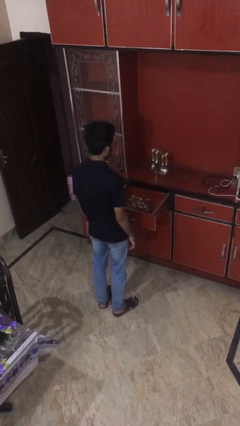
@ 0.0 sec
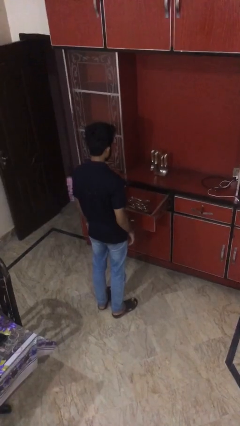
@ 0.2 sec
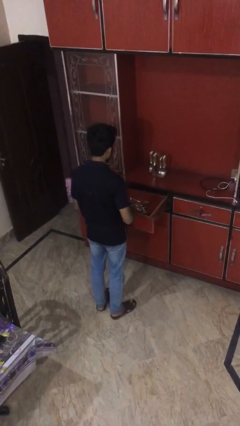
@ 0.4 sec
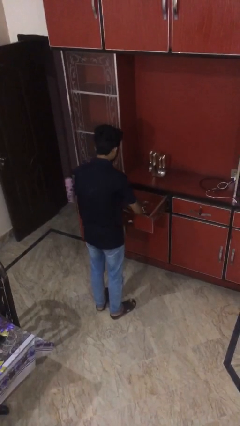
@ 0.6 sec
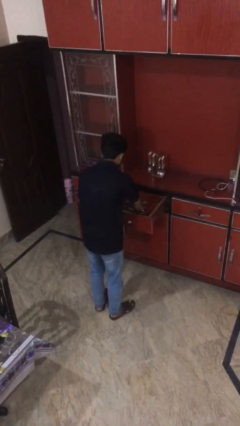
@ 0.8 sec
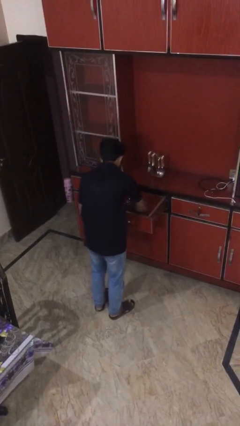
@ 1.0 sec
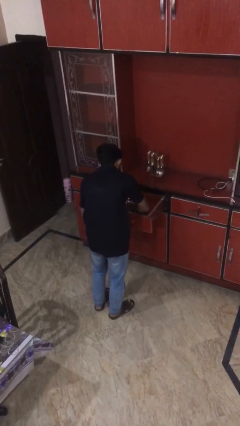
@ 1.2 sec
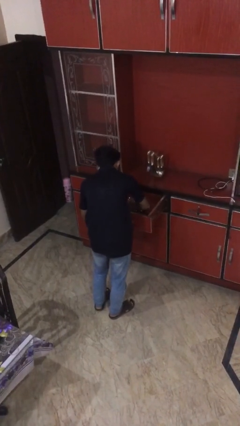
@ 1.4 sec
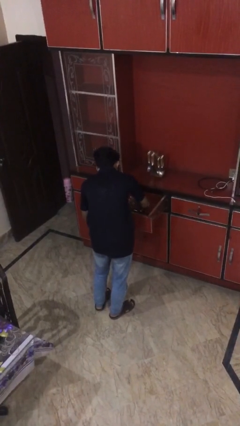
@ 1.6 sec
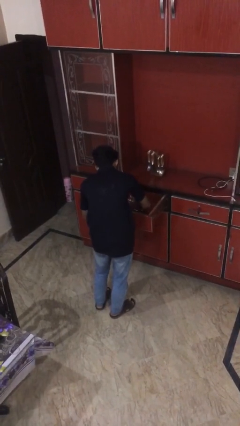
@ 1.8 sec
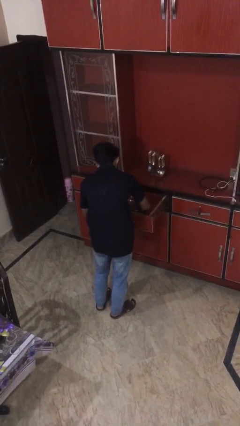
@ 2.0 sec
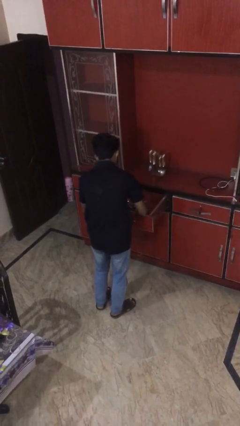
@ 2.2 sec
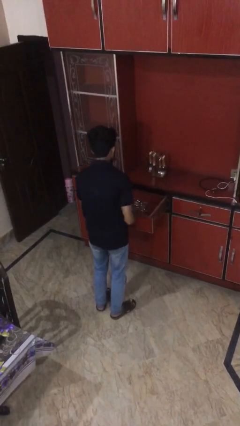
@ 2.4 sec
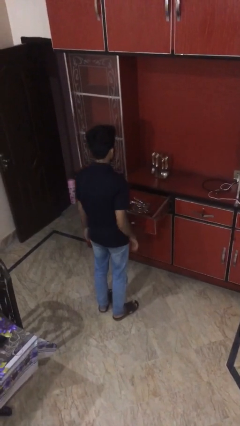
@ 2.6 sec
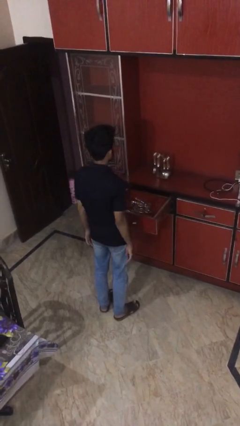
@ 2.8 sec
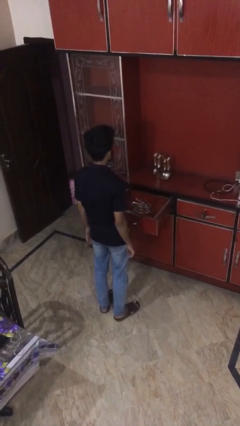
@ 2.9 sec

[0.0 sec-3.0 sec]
person searches in kitchen drawer

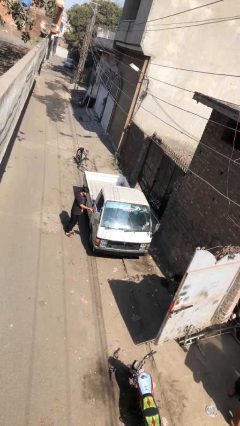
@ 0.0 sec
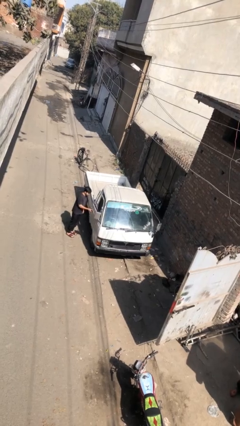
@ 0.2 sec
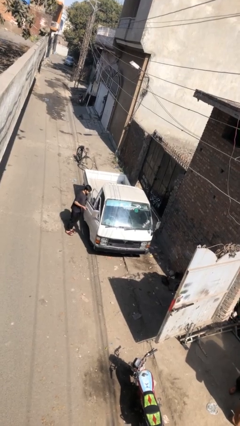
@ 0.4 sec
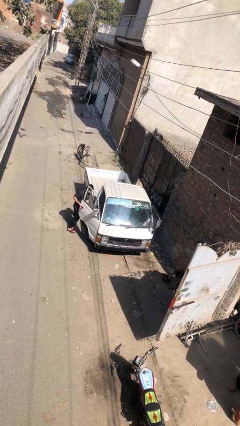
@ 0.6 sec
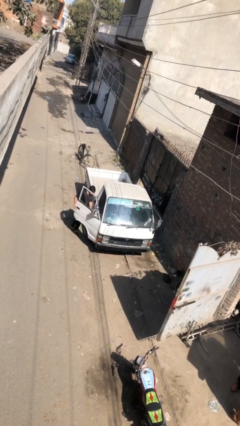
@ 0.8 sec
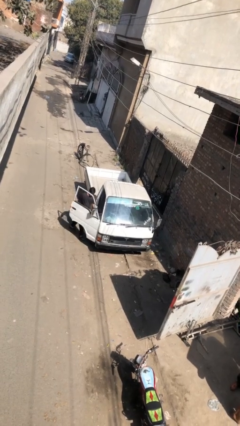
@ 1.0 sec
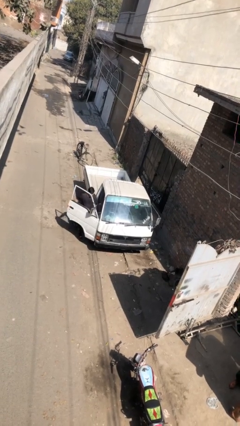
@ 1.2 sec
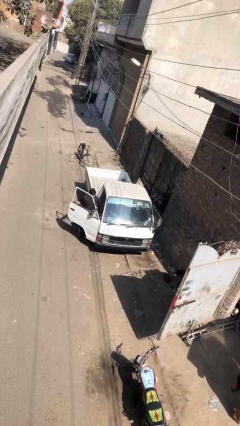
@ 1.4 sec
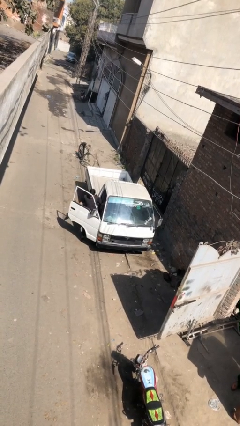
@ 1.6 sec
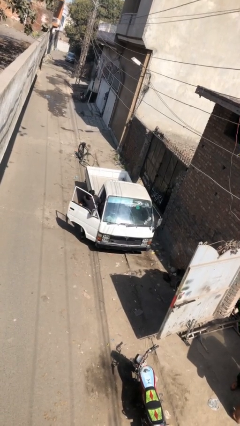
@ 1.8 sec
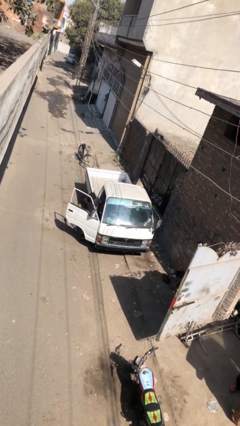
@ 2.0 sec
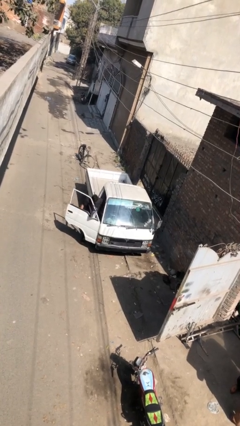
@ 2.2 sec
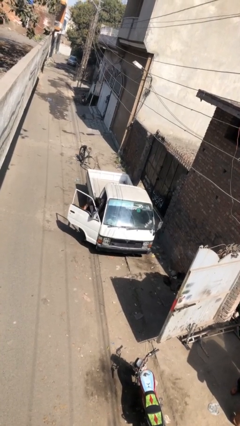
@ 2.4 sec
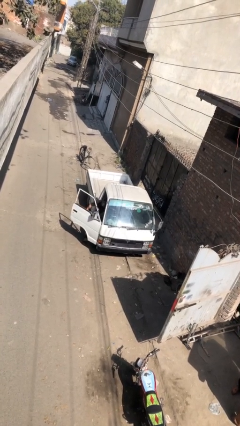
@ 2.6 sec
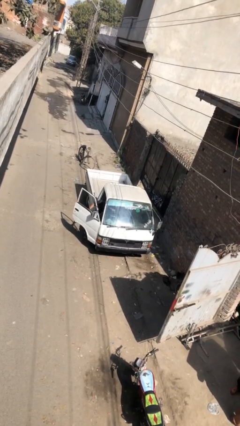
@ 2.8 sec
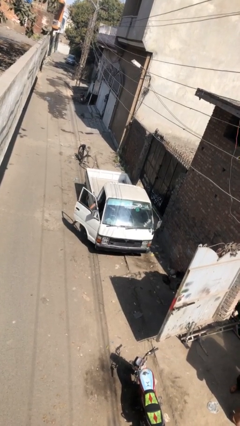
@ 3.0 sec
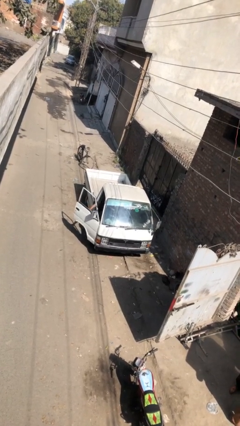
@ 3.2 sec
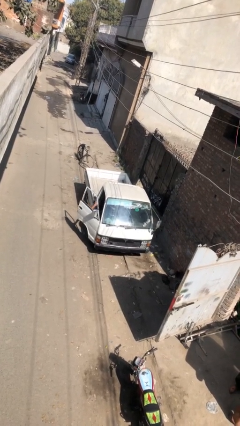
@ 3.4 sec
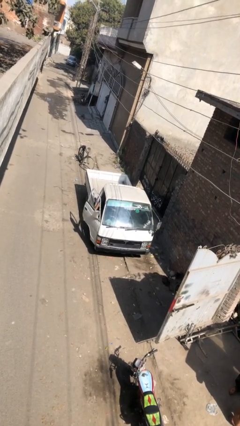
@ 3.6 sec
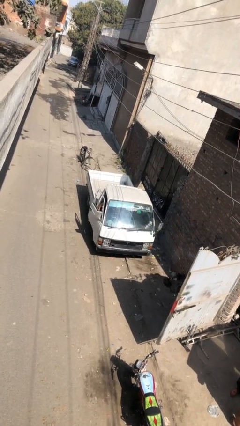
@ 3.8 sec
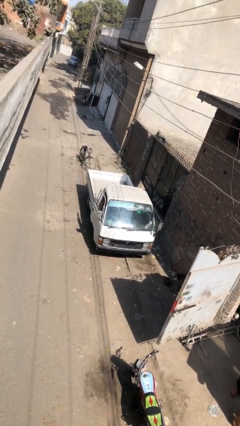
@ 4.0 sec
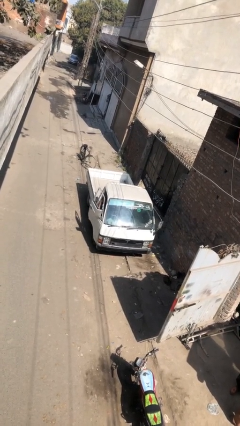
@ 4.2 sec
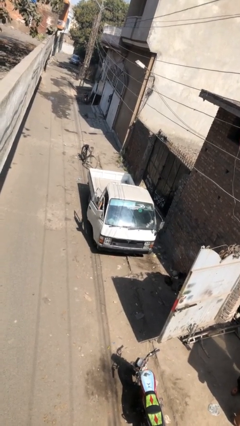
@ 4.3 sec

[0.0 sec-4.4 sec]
car picks up person

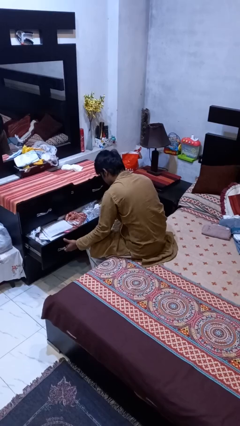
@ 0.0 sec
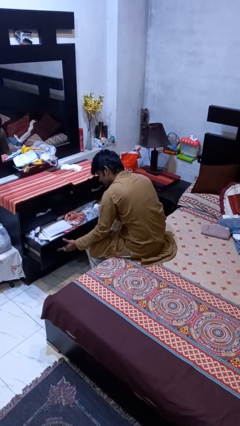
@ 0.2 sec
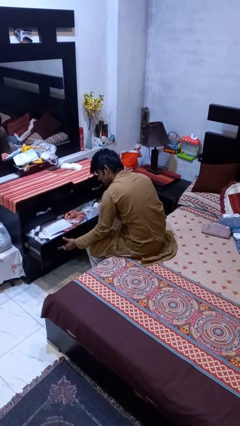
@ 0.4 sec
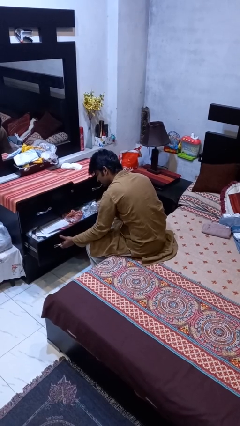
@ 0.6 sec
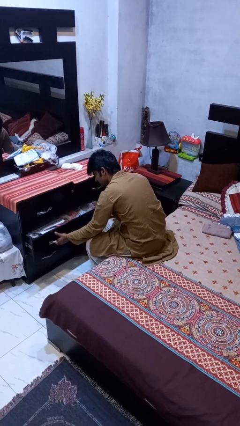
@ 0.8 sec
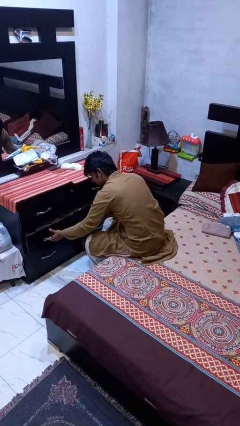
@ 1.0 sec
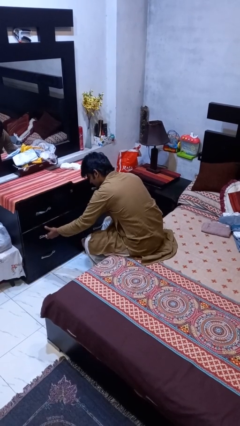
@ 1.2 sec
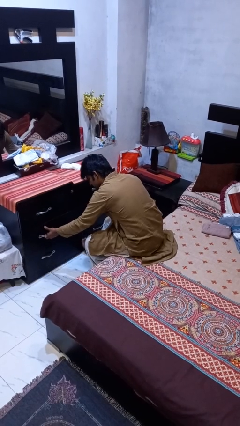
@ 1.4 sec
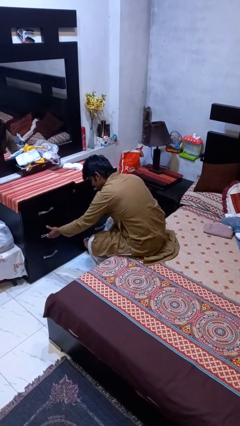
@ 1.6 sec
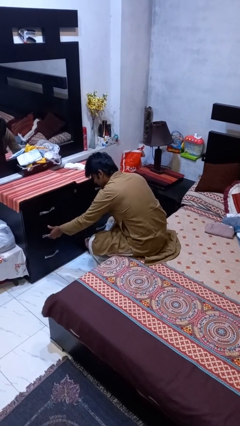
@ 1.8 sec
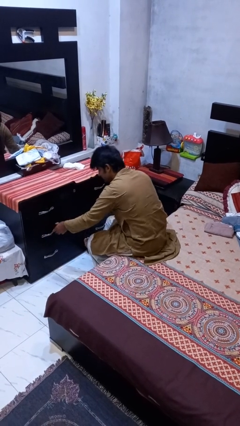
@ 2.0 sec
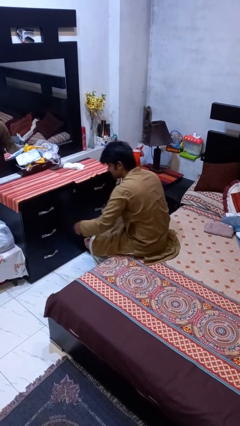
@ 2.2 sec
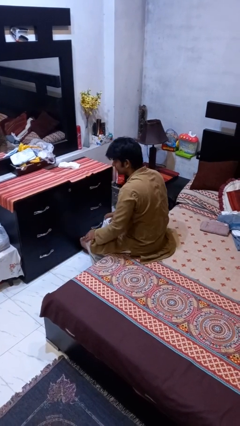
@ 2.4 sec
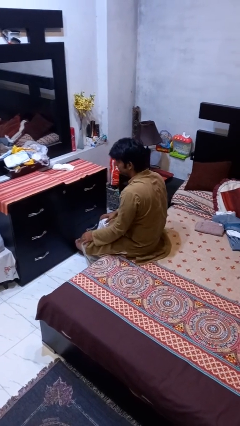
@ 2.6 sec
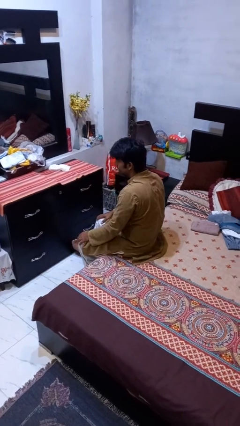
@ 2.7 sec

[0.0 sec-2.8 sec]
person closes dresser drawer

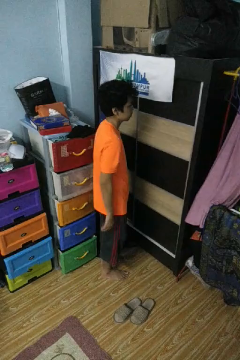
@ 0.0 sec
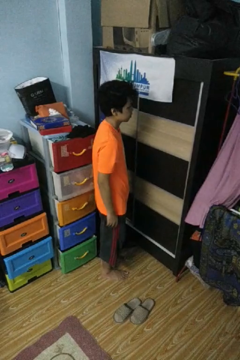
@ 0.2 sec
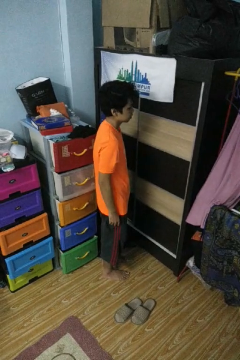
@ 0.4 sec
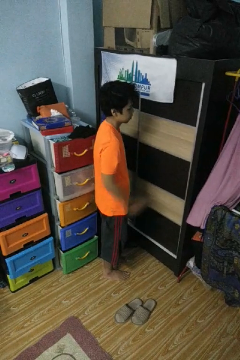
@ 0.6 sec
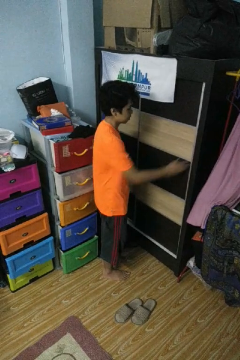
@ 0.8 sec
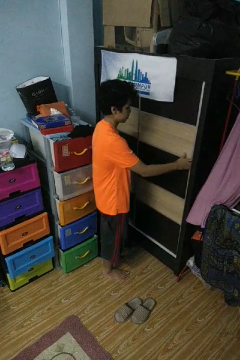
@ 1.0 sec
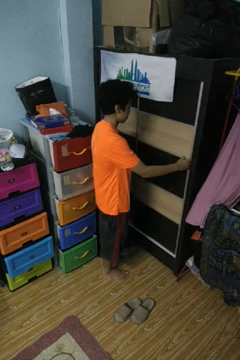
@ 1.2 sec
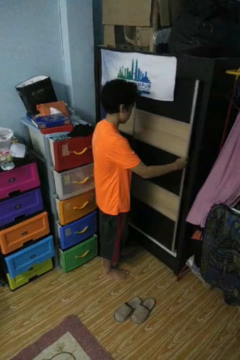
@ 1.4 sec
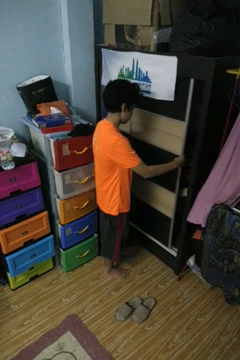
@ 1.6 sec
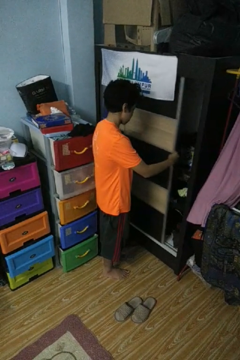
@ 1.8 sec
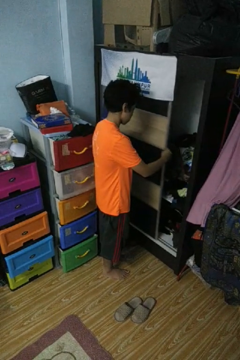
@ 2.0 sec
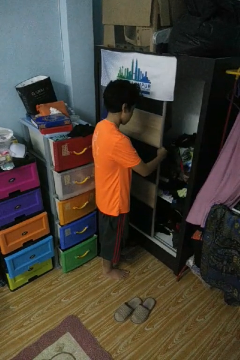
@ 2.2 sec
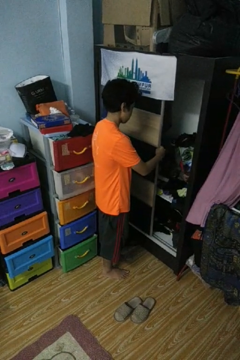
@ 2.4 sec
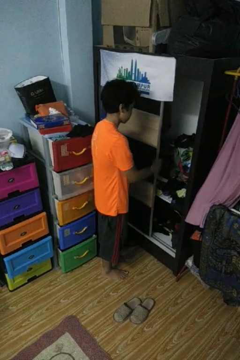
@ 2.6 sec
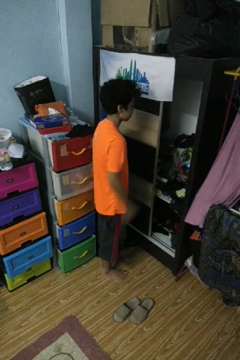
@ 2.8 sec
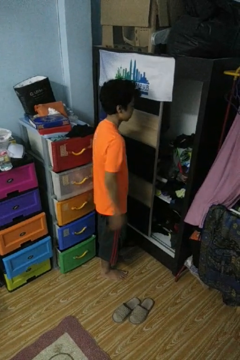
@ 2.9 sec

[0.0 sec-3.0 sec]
person opens closet door

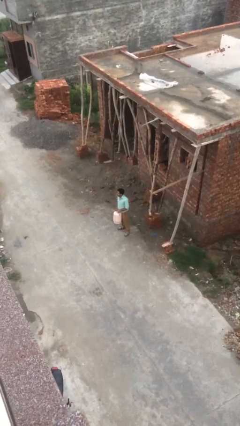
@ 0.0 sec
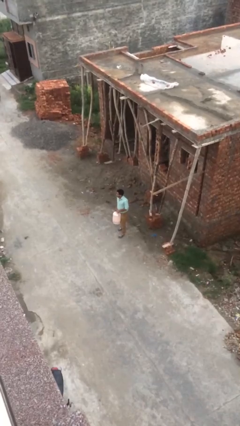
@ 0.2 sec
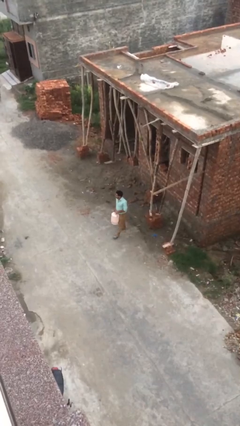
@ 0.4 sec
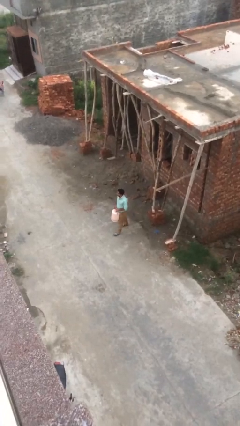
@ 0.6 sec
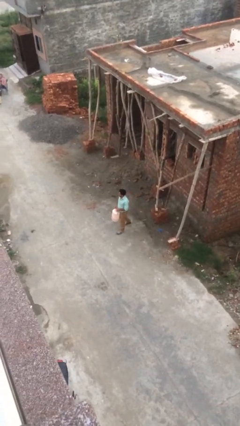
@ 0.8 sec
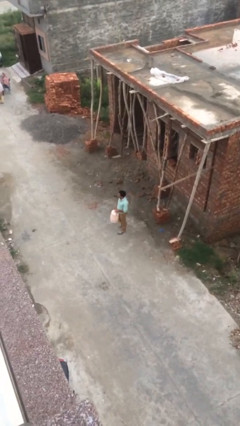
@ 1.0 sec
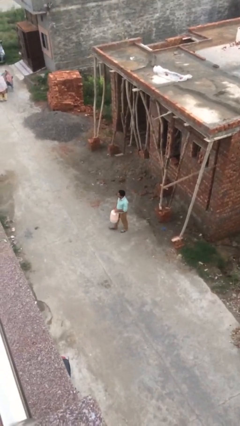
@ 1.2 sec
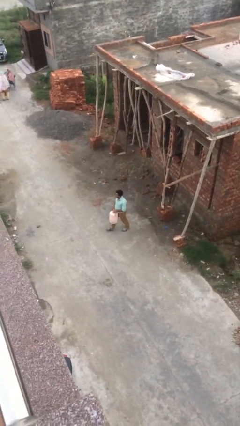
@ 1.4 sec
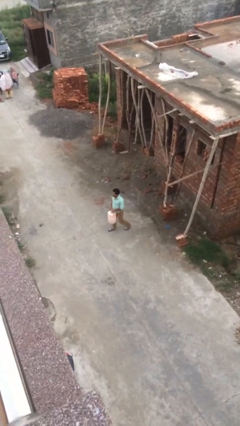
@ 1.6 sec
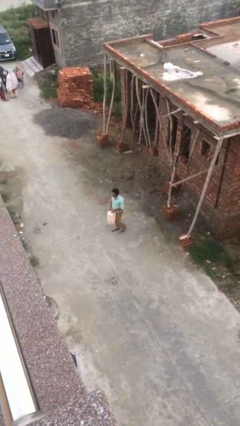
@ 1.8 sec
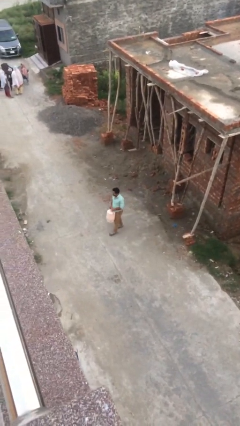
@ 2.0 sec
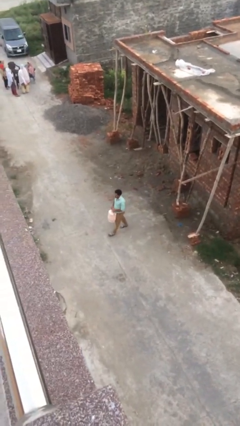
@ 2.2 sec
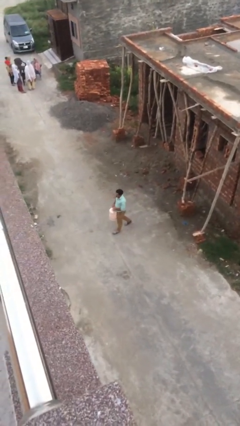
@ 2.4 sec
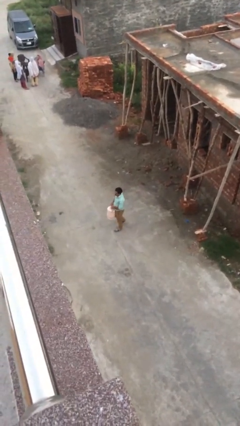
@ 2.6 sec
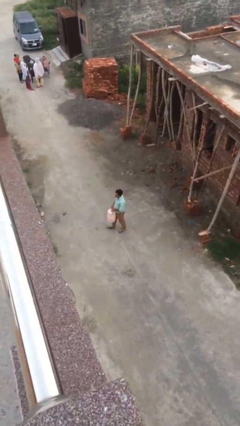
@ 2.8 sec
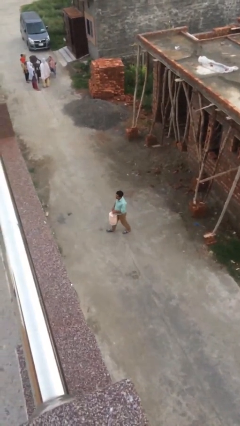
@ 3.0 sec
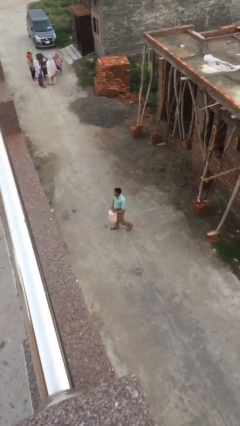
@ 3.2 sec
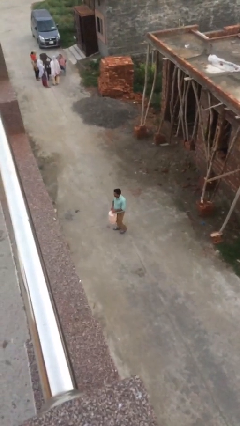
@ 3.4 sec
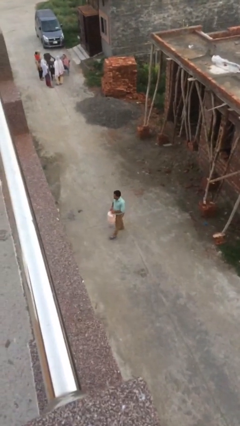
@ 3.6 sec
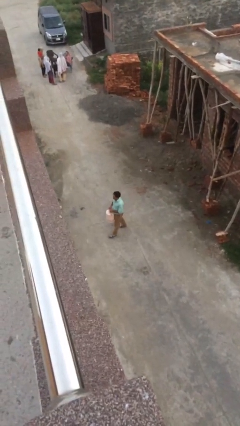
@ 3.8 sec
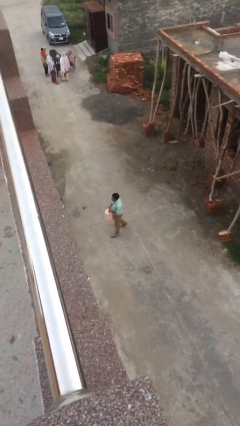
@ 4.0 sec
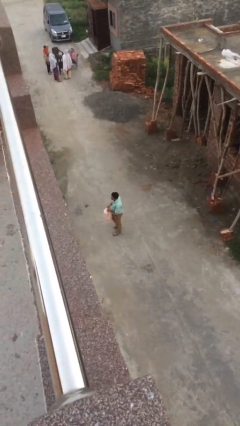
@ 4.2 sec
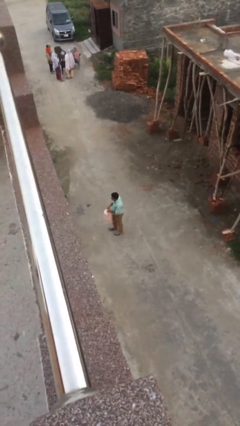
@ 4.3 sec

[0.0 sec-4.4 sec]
person carries heavy object

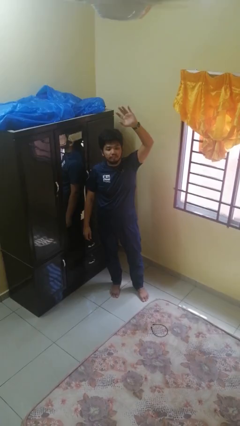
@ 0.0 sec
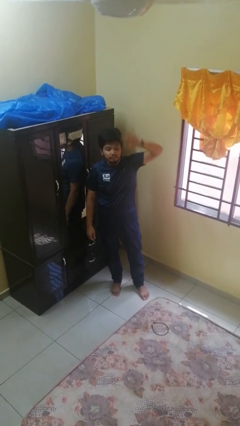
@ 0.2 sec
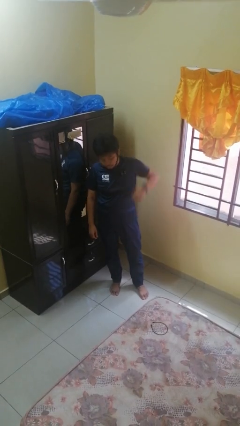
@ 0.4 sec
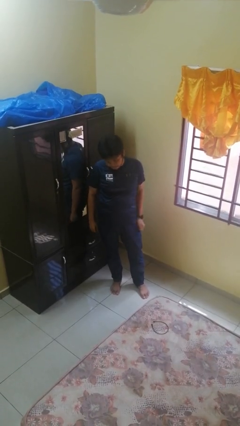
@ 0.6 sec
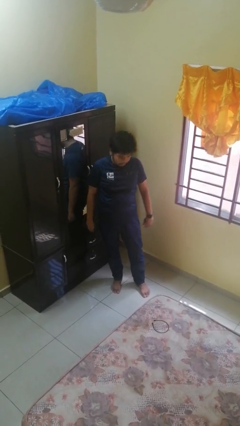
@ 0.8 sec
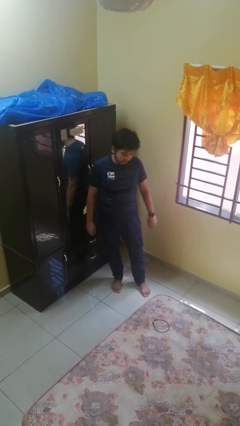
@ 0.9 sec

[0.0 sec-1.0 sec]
person gestures lower hand
